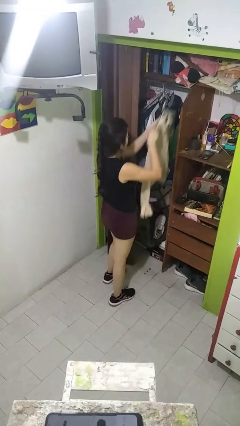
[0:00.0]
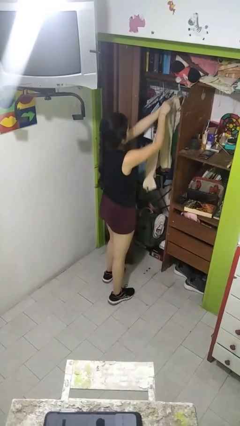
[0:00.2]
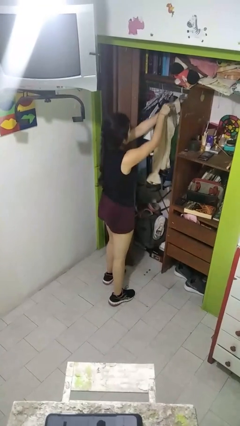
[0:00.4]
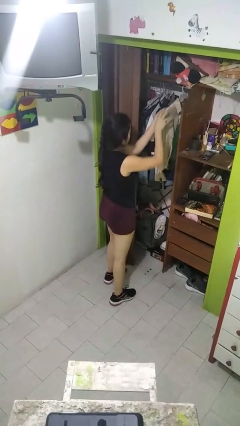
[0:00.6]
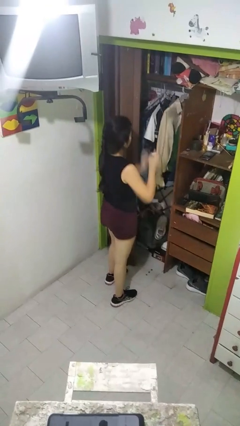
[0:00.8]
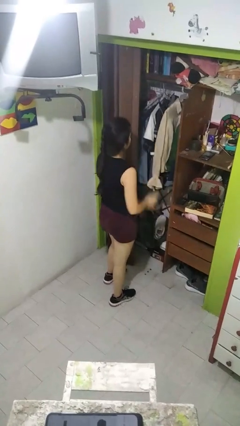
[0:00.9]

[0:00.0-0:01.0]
person puts clothes into closet

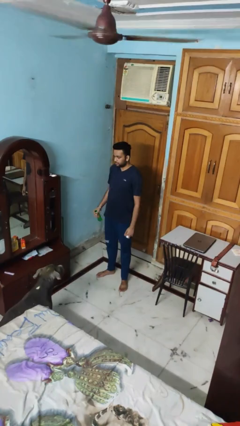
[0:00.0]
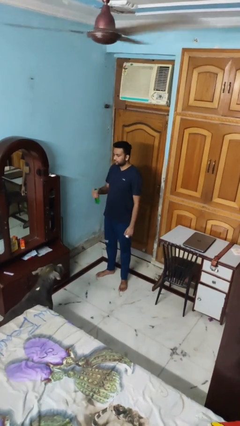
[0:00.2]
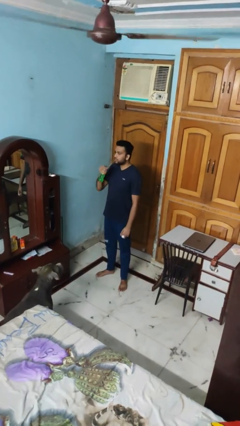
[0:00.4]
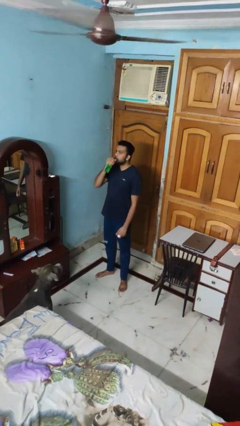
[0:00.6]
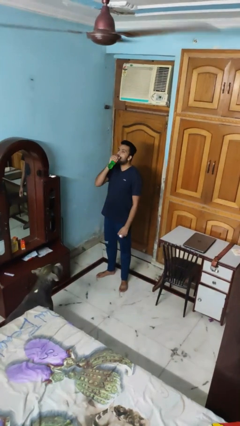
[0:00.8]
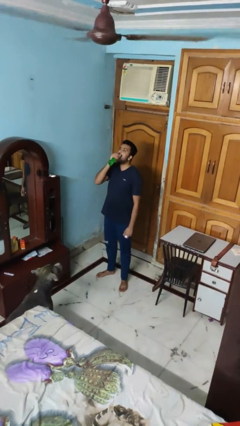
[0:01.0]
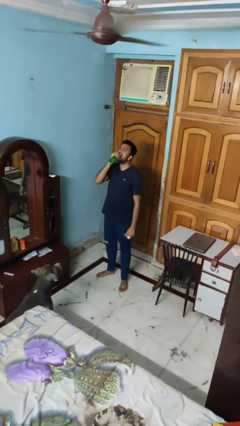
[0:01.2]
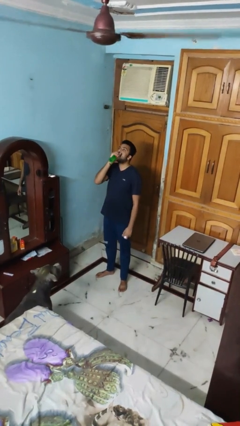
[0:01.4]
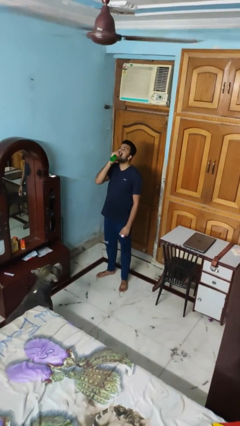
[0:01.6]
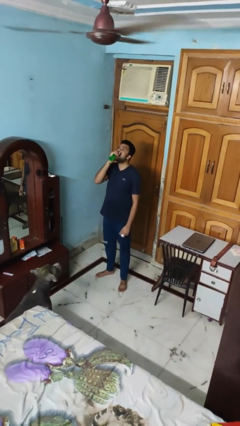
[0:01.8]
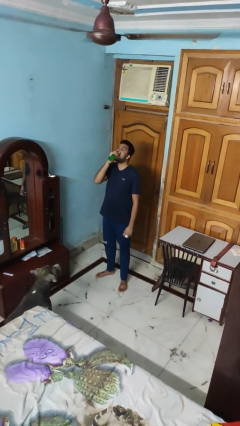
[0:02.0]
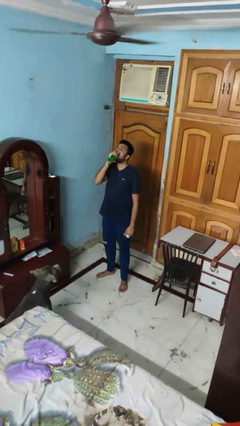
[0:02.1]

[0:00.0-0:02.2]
person drinks from bottle

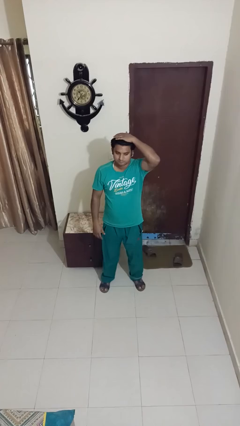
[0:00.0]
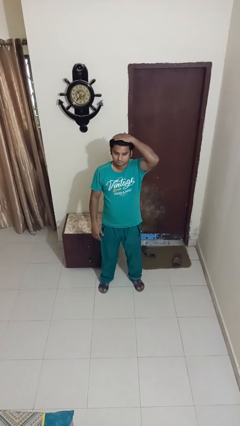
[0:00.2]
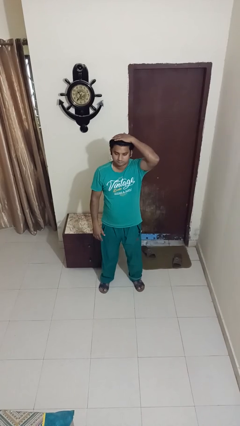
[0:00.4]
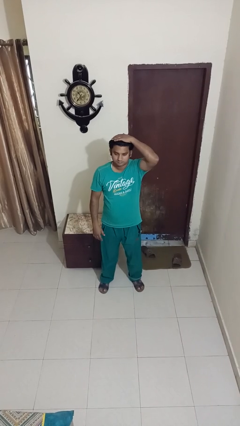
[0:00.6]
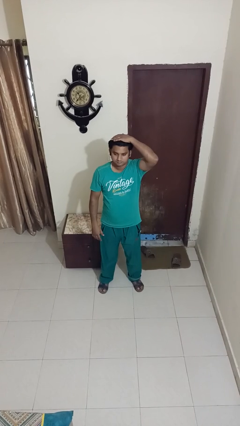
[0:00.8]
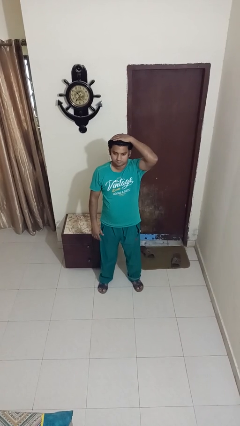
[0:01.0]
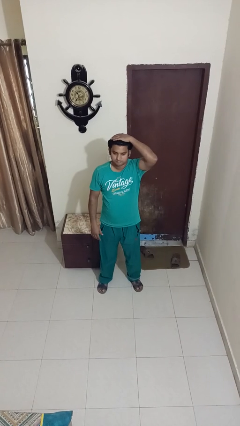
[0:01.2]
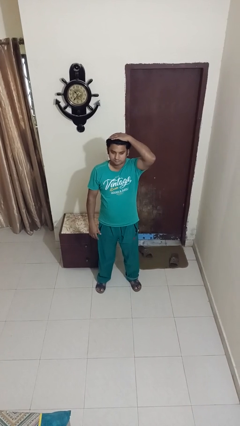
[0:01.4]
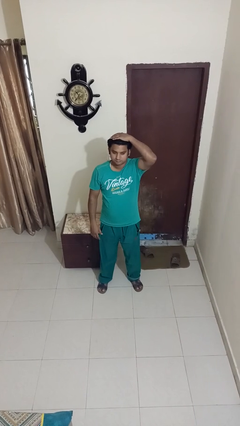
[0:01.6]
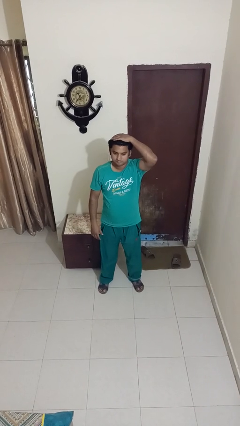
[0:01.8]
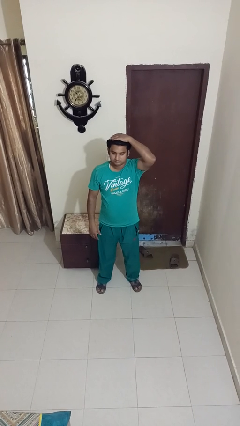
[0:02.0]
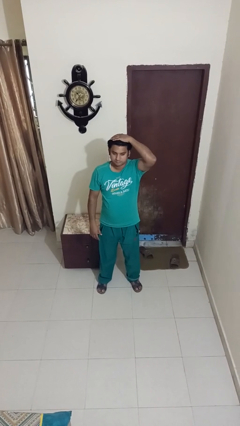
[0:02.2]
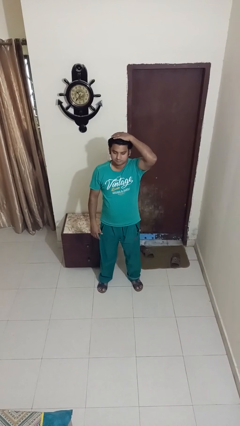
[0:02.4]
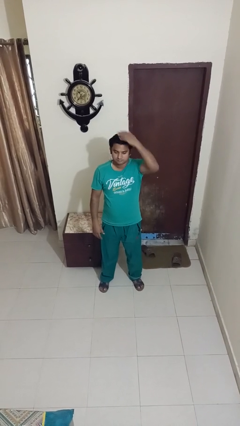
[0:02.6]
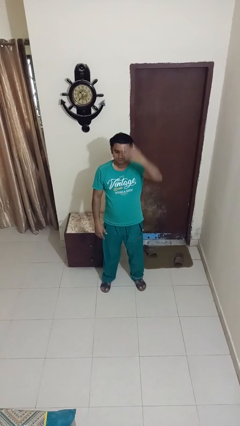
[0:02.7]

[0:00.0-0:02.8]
person pats head

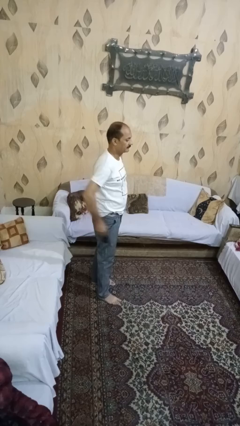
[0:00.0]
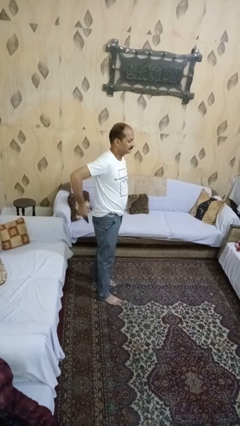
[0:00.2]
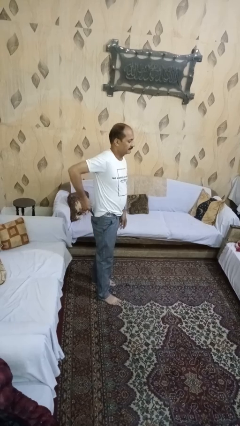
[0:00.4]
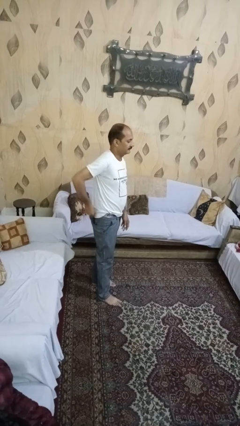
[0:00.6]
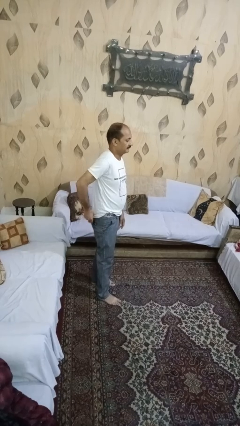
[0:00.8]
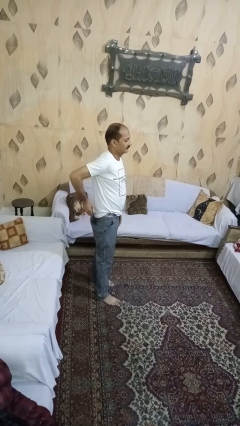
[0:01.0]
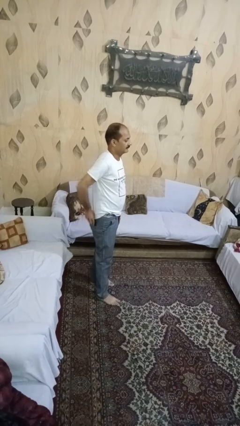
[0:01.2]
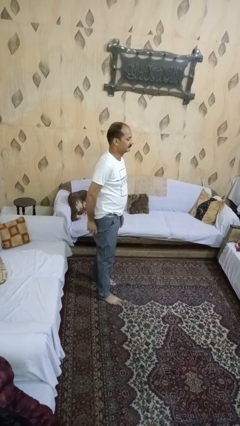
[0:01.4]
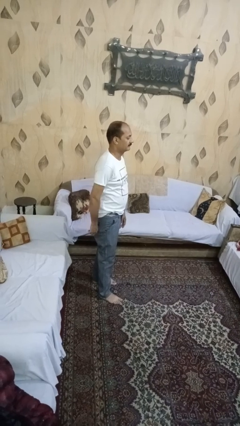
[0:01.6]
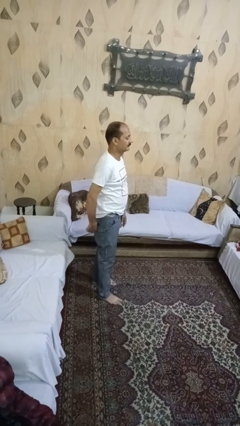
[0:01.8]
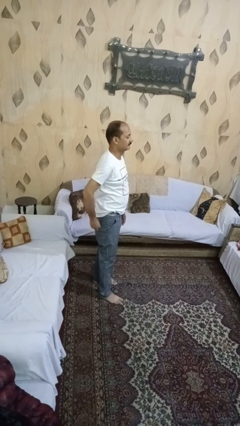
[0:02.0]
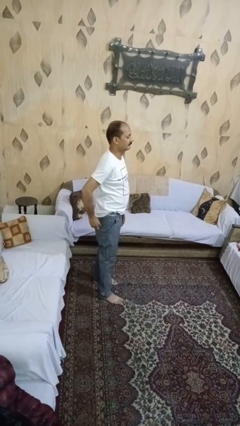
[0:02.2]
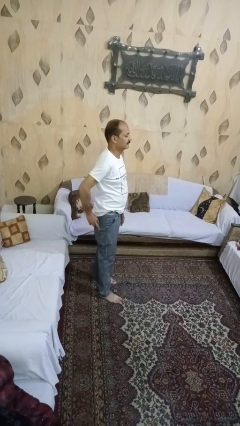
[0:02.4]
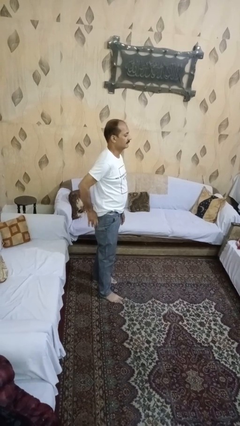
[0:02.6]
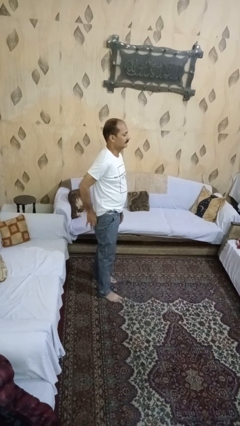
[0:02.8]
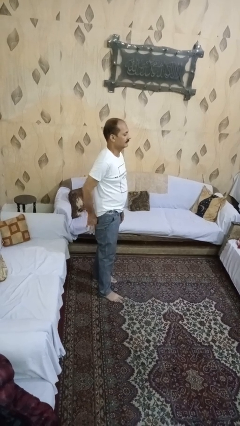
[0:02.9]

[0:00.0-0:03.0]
person puts phone into pocket

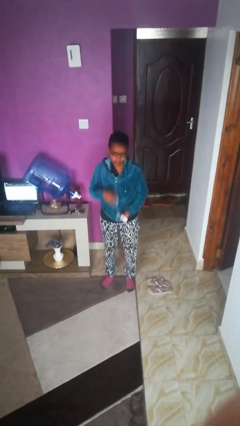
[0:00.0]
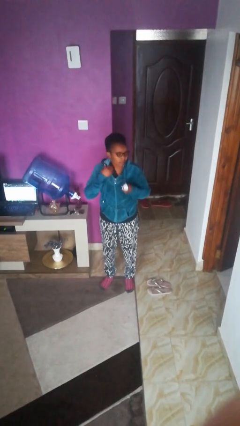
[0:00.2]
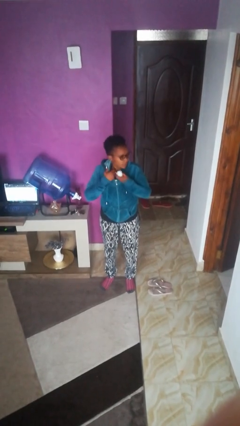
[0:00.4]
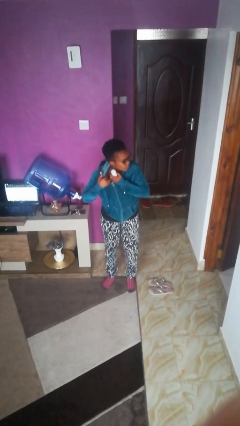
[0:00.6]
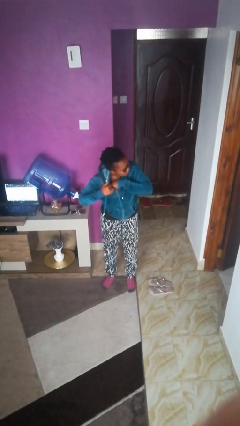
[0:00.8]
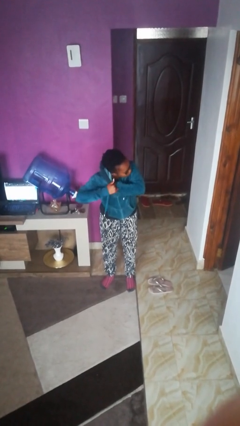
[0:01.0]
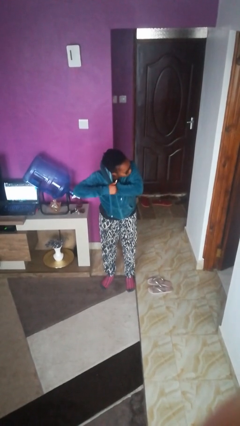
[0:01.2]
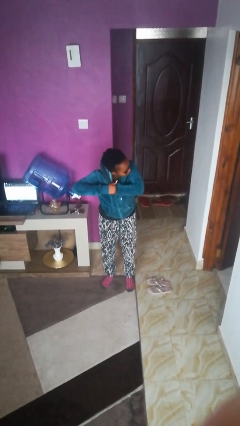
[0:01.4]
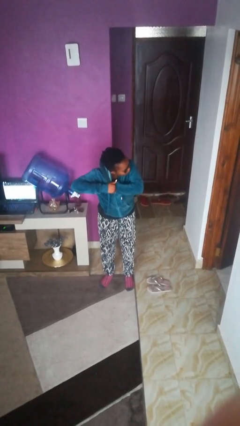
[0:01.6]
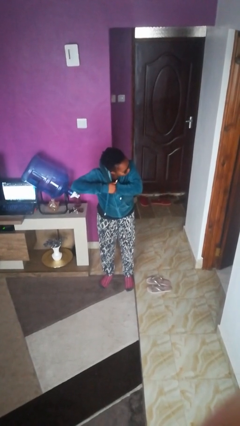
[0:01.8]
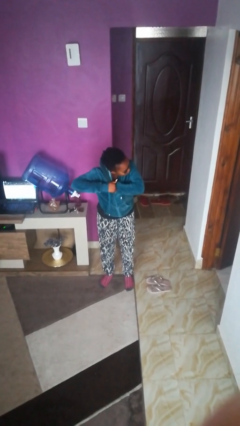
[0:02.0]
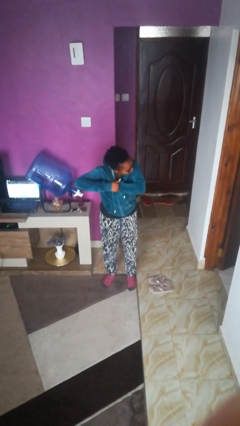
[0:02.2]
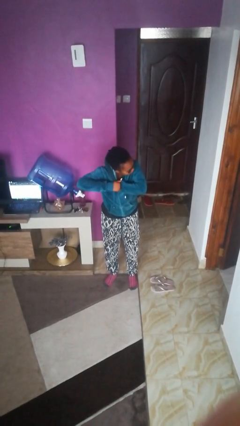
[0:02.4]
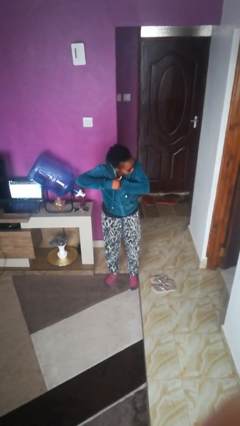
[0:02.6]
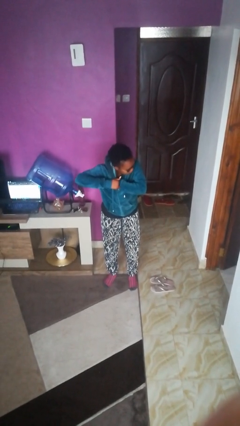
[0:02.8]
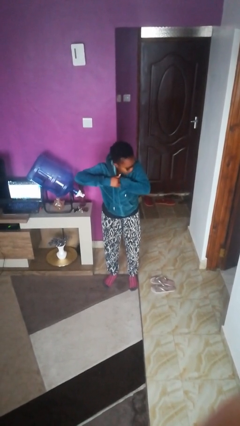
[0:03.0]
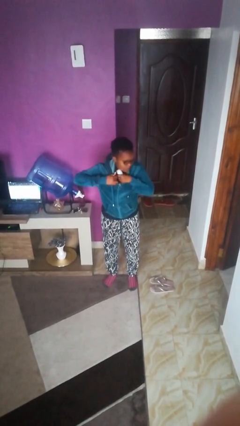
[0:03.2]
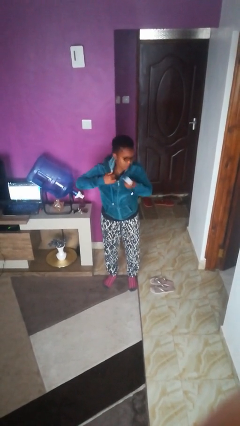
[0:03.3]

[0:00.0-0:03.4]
person applies deodorant

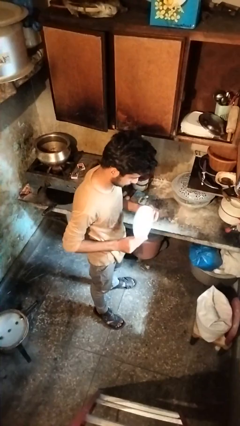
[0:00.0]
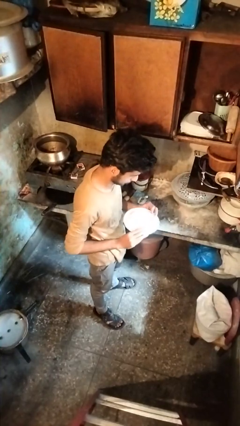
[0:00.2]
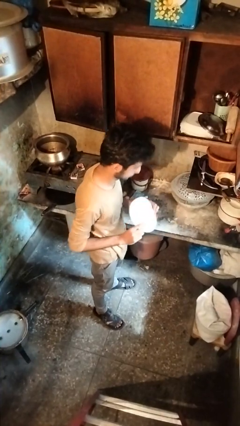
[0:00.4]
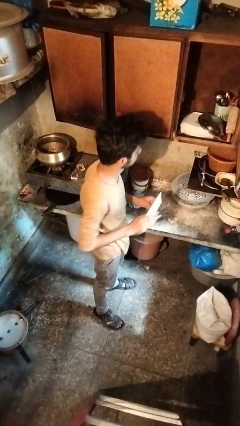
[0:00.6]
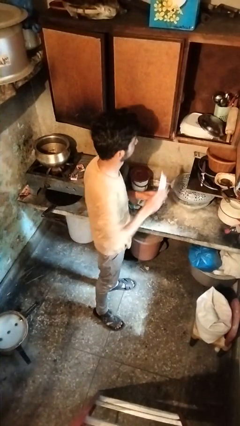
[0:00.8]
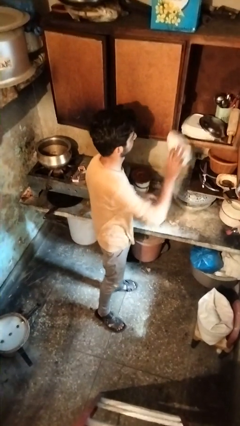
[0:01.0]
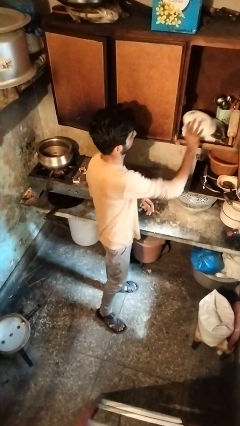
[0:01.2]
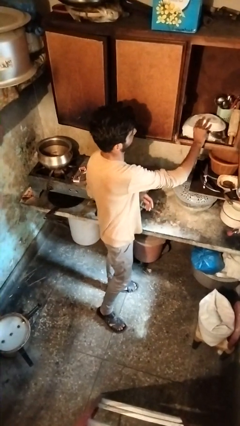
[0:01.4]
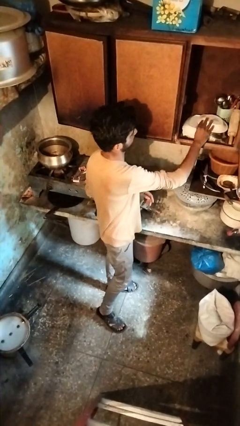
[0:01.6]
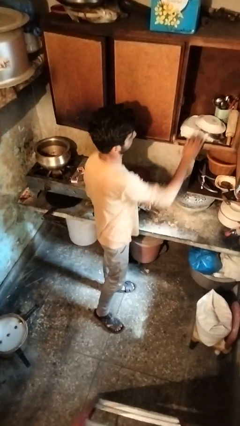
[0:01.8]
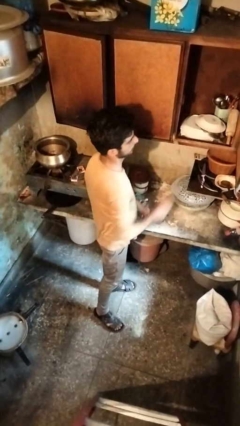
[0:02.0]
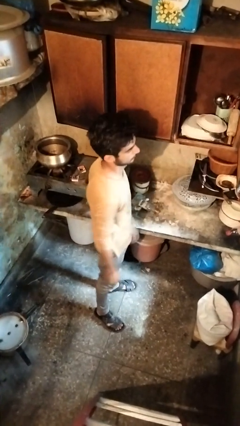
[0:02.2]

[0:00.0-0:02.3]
person puts down object into cabinet

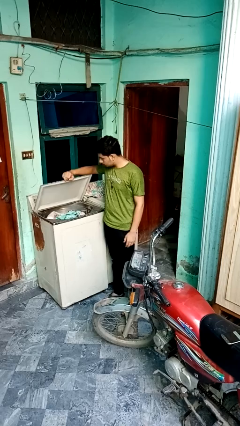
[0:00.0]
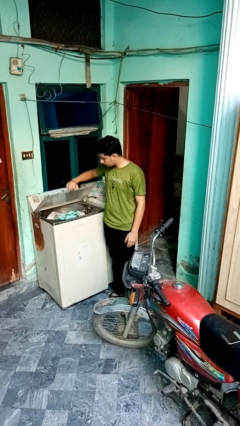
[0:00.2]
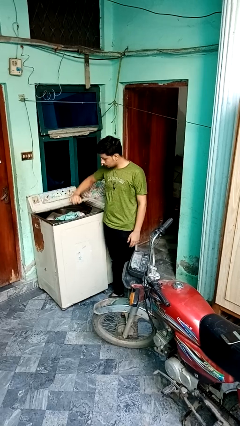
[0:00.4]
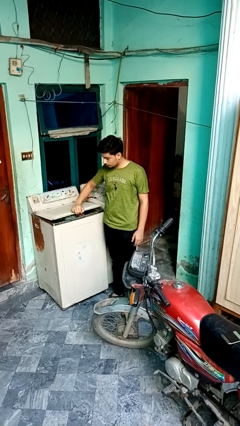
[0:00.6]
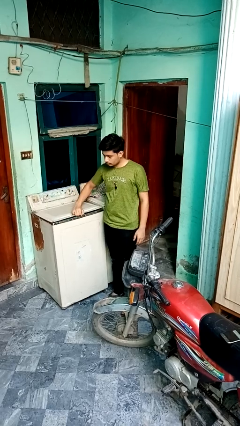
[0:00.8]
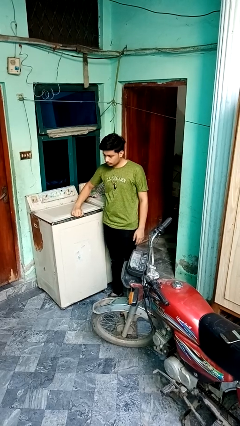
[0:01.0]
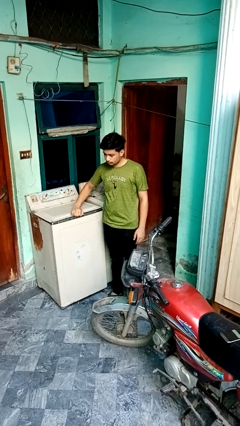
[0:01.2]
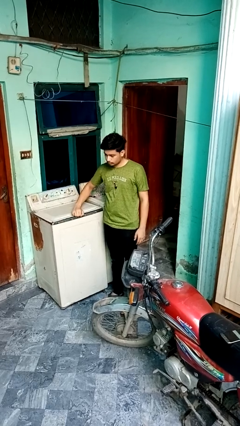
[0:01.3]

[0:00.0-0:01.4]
person closes clothes washer

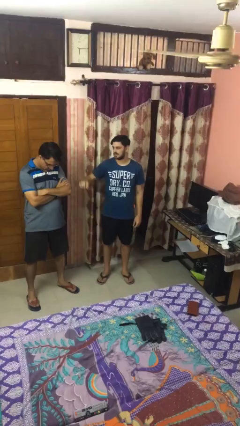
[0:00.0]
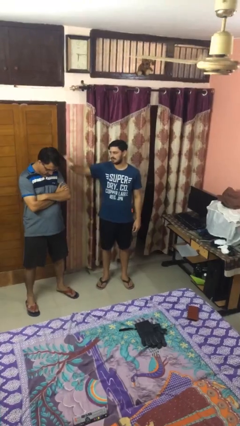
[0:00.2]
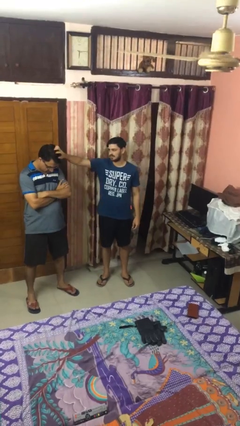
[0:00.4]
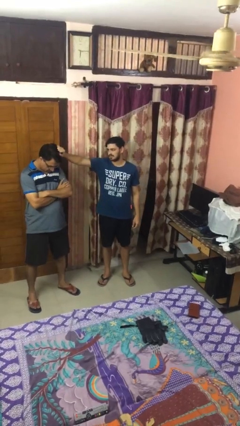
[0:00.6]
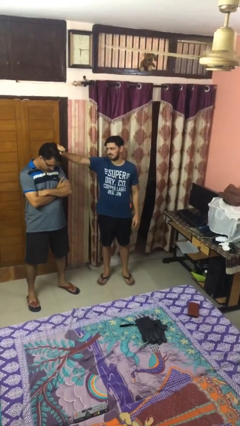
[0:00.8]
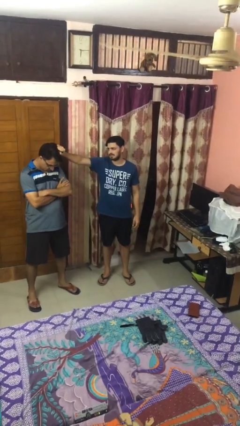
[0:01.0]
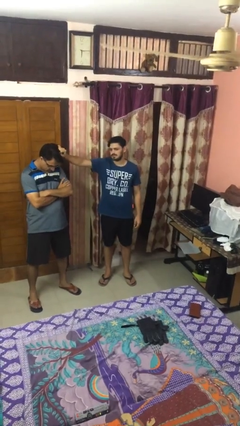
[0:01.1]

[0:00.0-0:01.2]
person grabs person by hair
